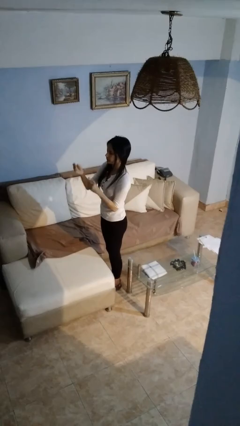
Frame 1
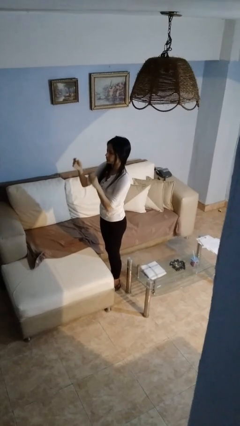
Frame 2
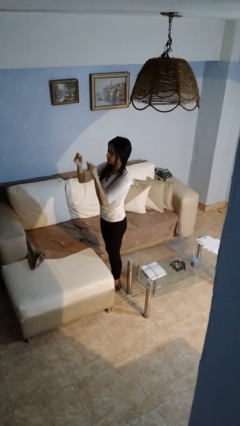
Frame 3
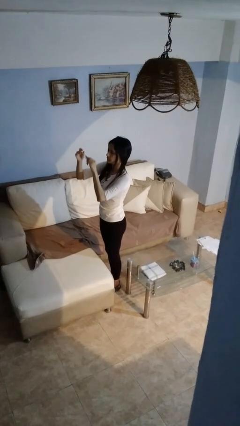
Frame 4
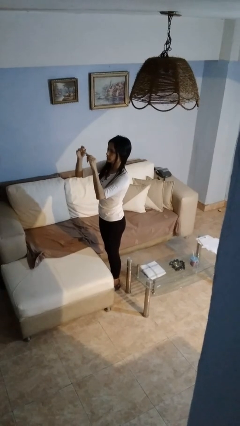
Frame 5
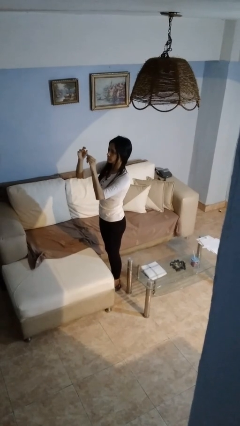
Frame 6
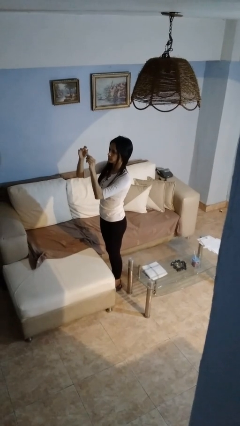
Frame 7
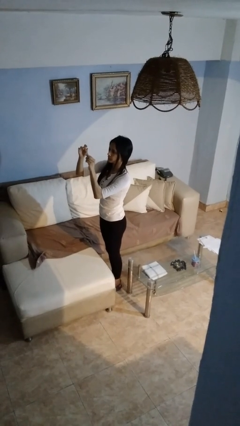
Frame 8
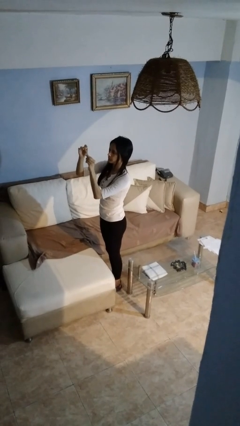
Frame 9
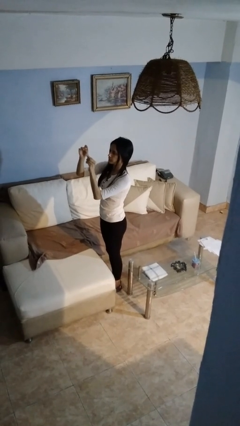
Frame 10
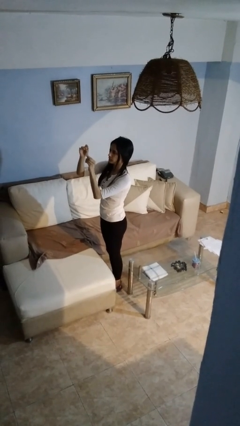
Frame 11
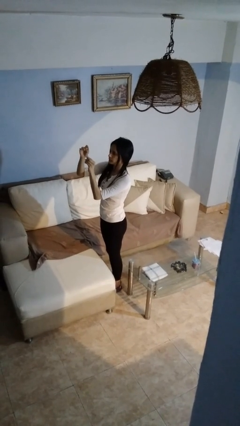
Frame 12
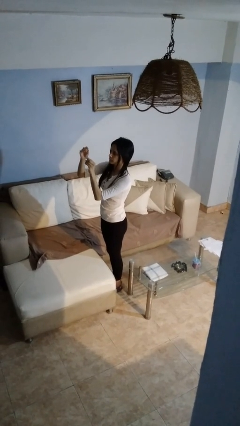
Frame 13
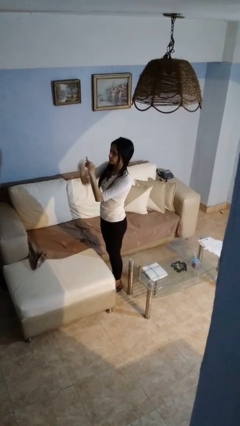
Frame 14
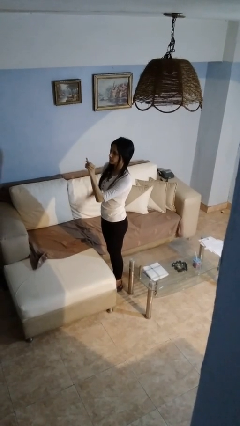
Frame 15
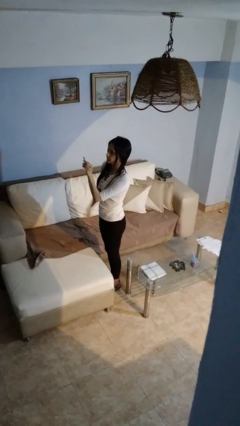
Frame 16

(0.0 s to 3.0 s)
person clips fingernails

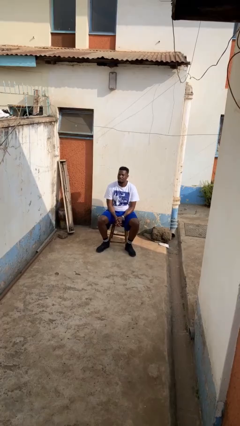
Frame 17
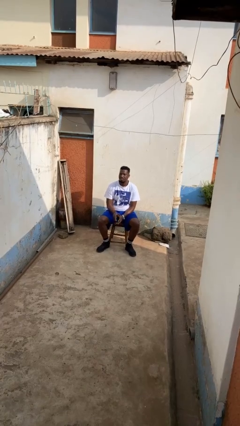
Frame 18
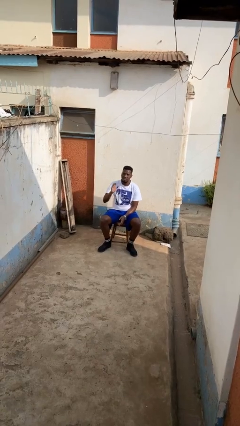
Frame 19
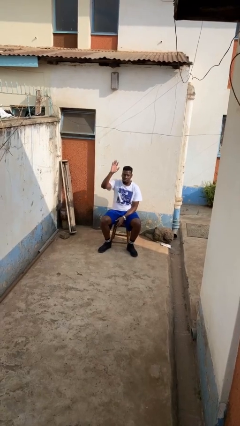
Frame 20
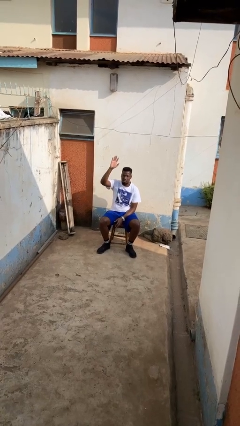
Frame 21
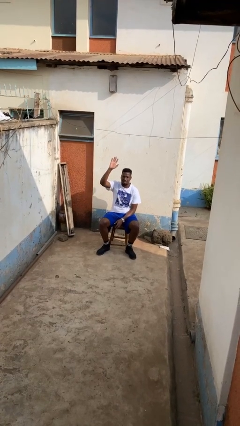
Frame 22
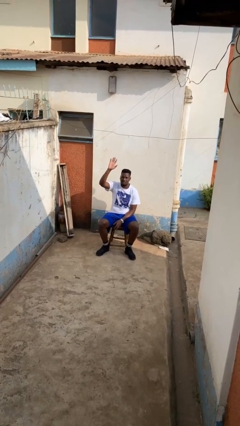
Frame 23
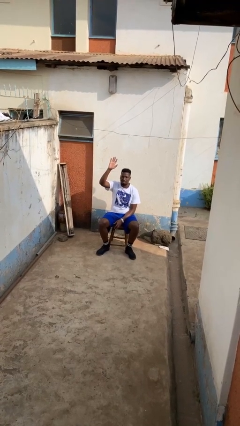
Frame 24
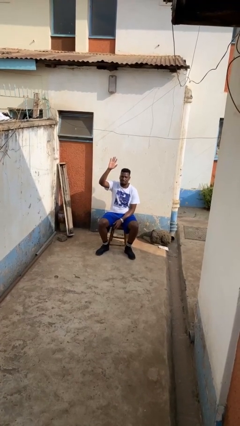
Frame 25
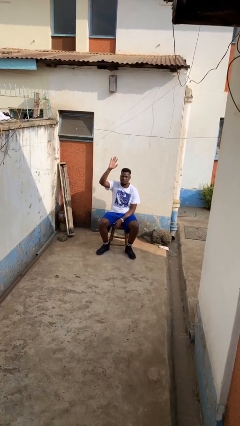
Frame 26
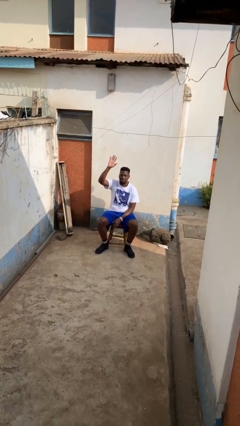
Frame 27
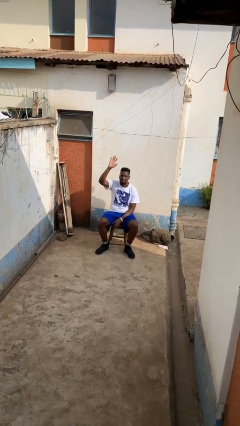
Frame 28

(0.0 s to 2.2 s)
person gestures raise hand

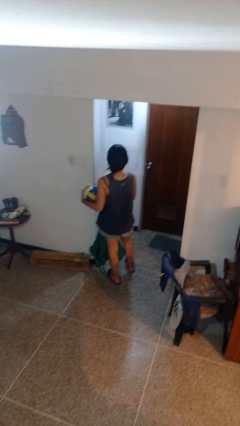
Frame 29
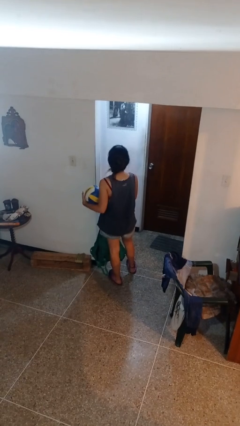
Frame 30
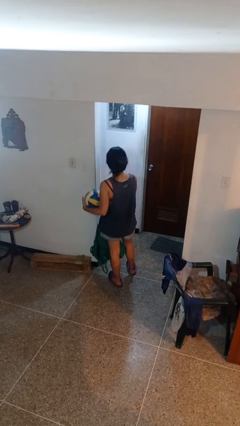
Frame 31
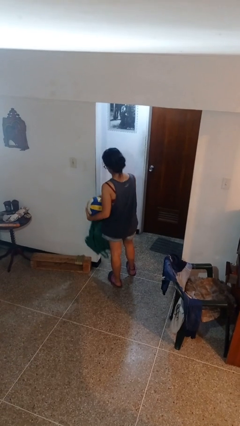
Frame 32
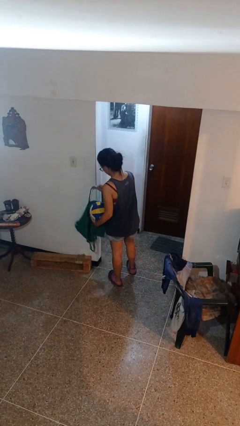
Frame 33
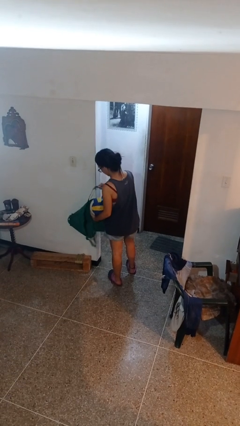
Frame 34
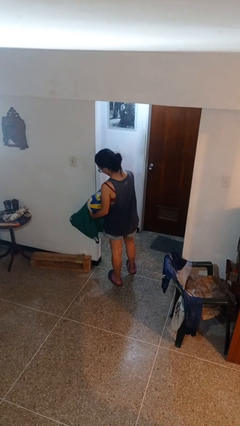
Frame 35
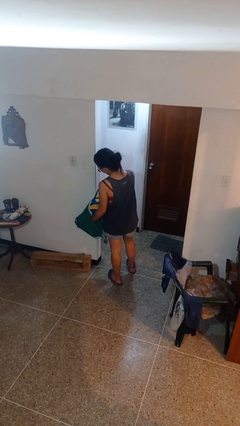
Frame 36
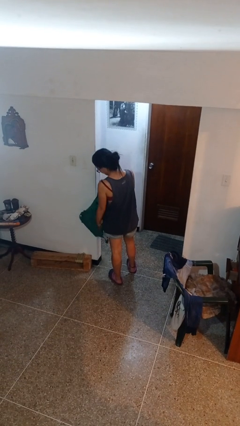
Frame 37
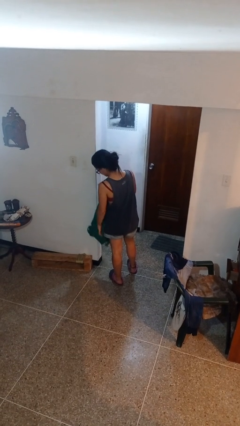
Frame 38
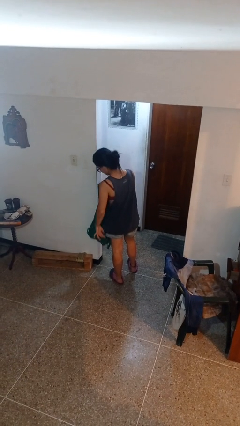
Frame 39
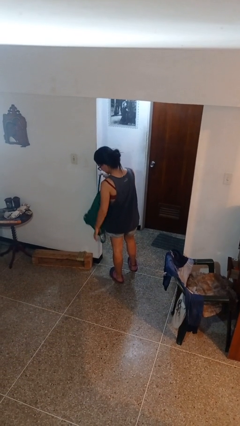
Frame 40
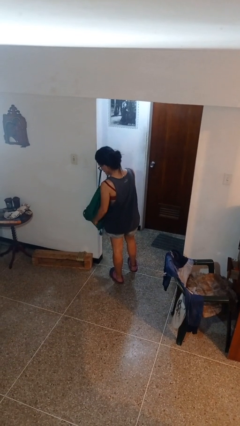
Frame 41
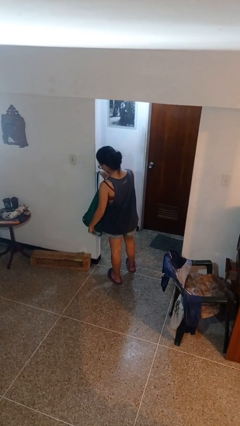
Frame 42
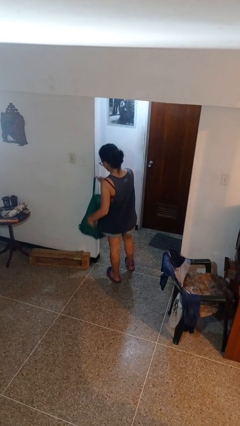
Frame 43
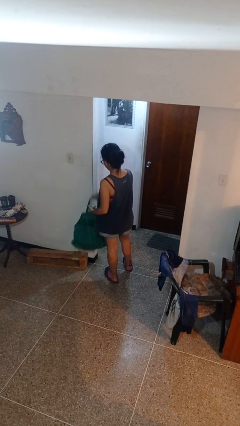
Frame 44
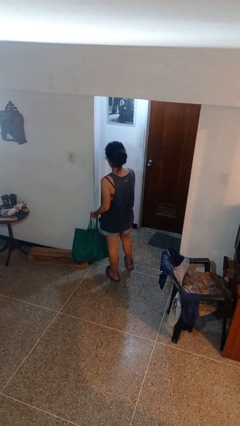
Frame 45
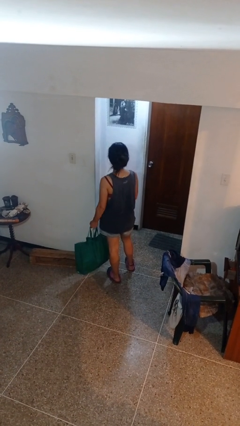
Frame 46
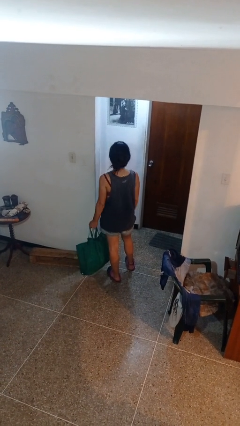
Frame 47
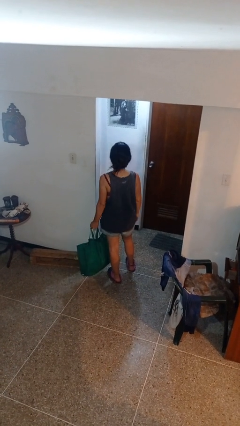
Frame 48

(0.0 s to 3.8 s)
person puts object into bag

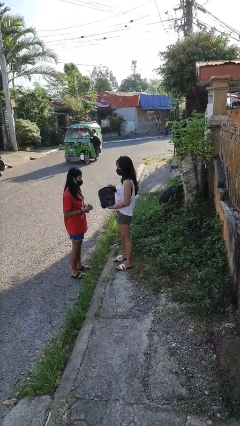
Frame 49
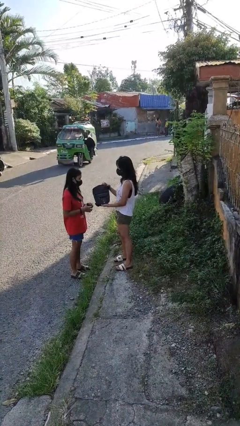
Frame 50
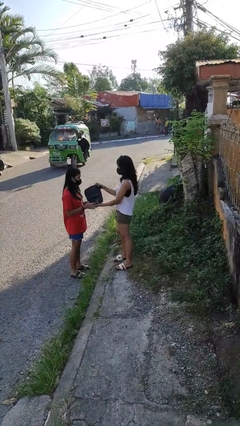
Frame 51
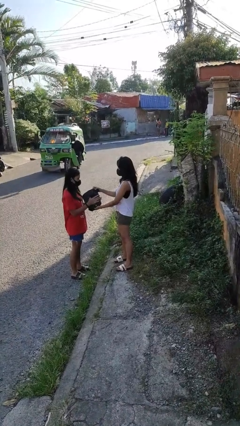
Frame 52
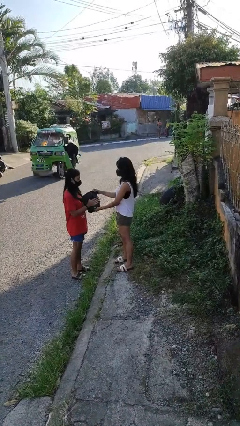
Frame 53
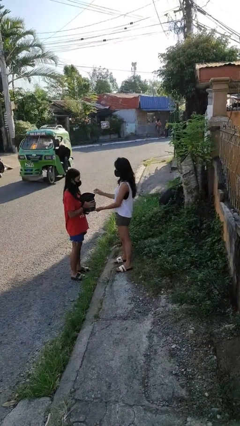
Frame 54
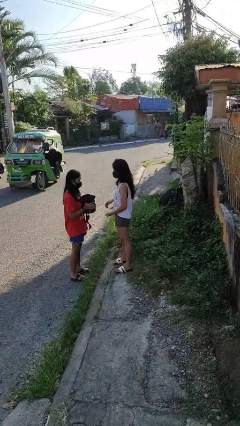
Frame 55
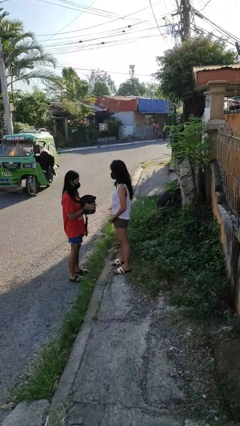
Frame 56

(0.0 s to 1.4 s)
person transfers object to person

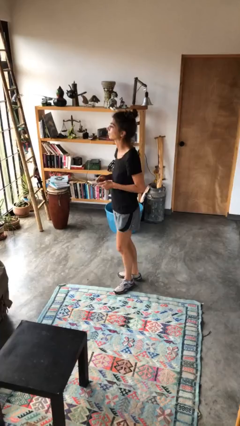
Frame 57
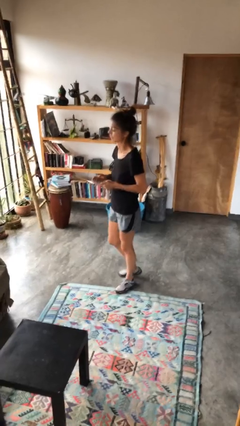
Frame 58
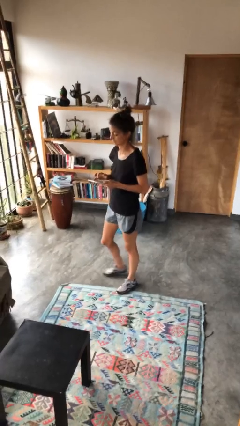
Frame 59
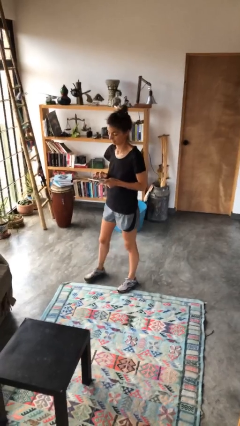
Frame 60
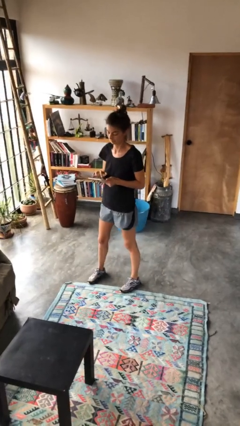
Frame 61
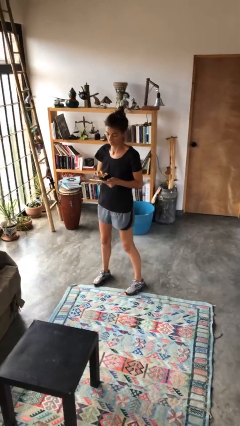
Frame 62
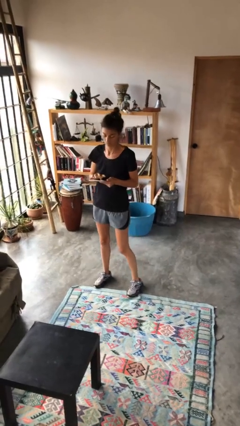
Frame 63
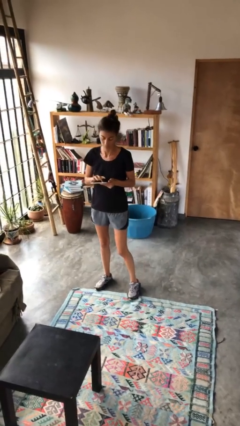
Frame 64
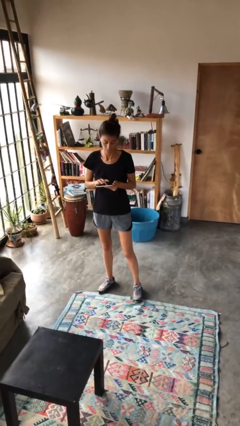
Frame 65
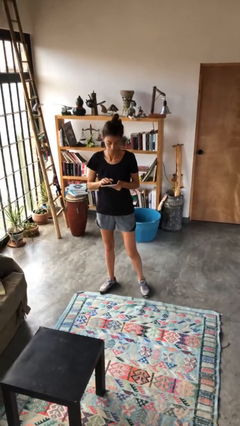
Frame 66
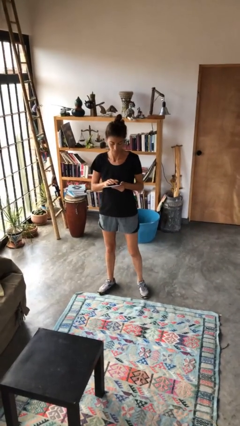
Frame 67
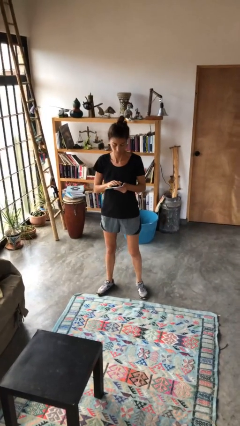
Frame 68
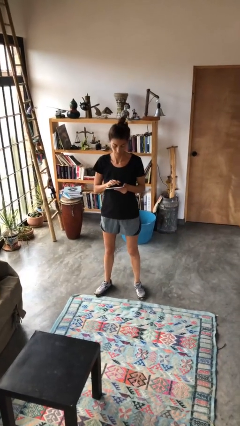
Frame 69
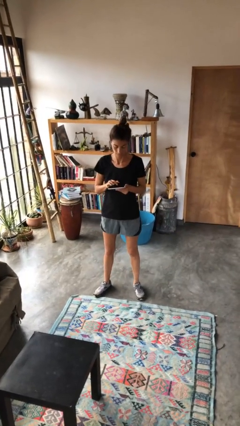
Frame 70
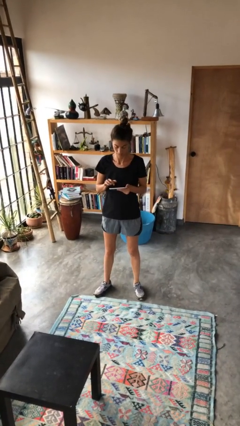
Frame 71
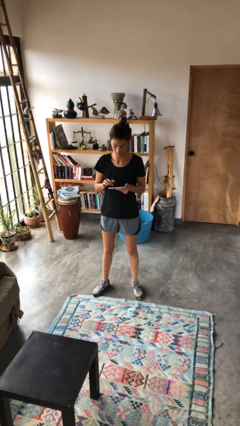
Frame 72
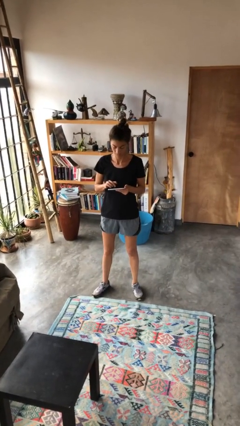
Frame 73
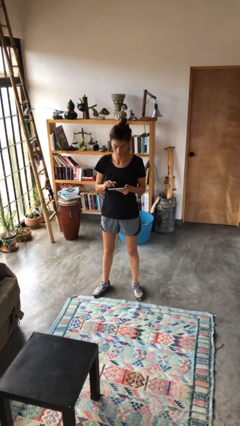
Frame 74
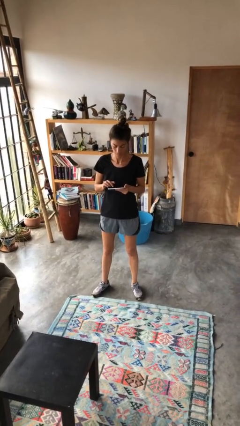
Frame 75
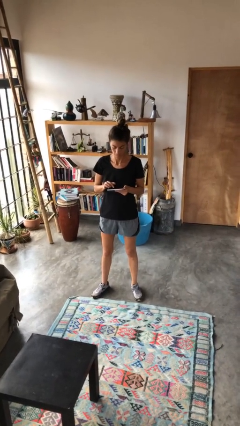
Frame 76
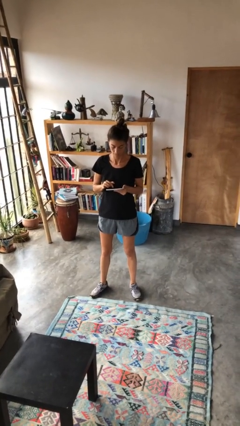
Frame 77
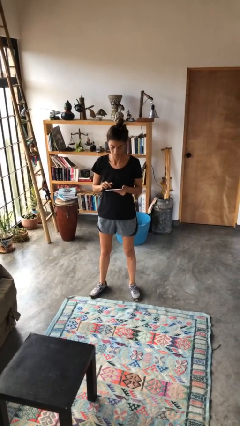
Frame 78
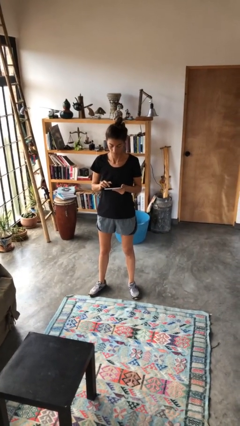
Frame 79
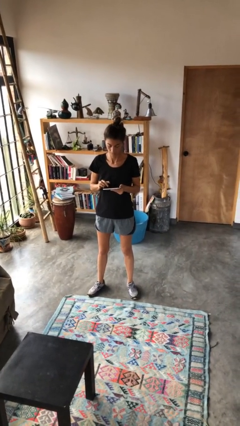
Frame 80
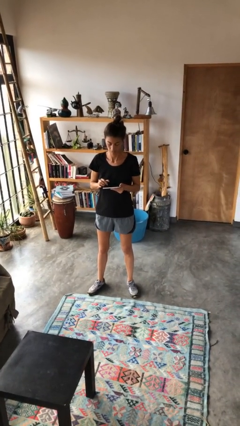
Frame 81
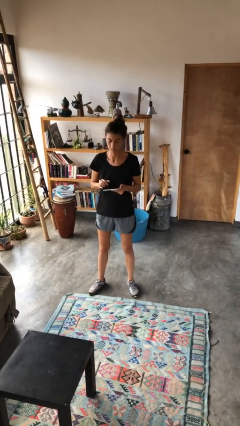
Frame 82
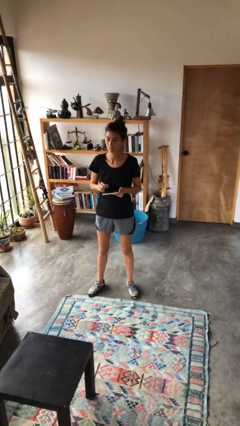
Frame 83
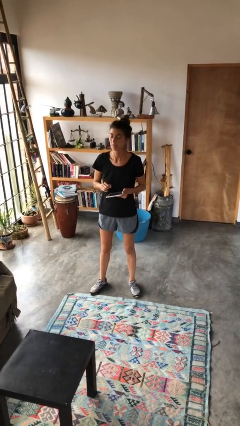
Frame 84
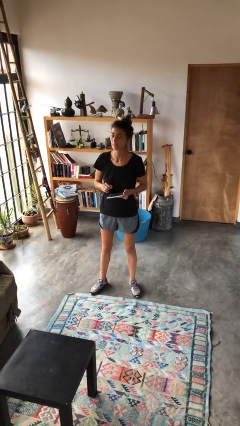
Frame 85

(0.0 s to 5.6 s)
person interacts with tablet

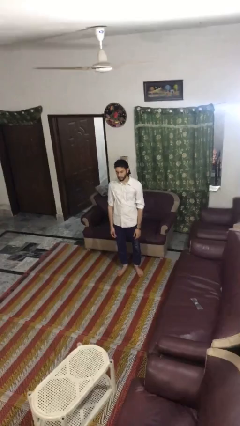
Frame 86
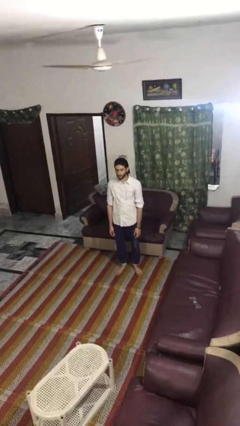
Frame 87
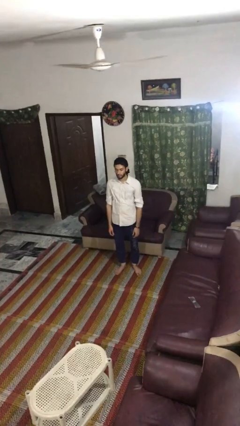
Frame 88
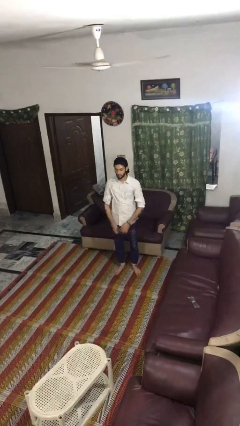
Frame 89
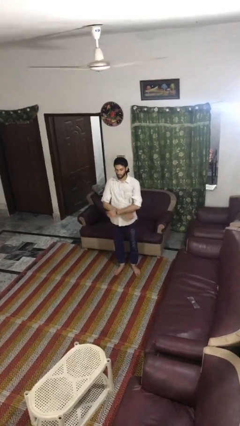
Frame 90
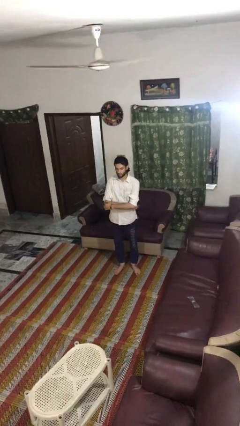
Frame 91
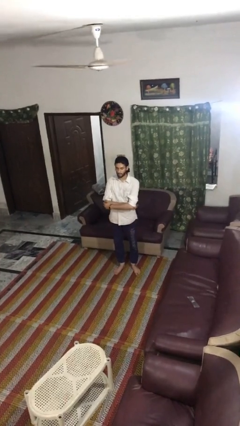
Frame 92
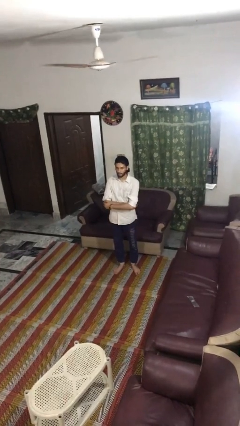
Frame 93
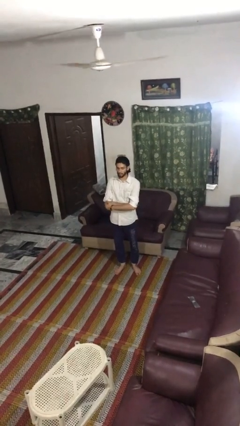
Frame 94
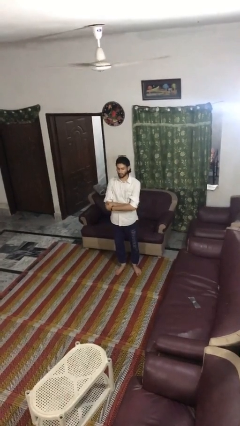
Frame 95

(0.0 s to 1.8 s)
person crosses arms
